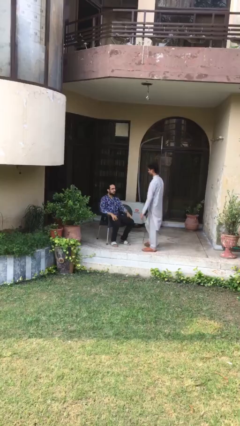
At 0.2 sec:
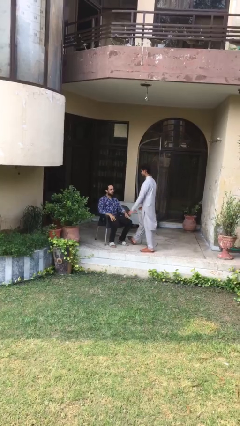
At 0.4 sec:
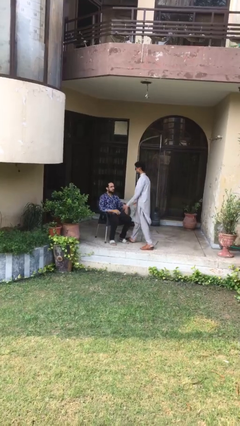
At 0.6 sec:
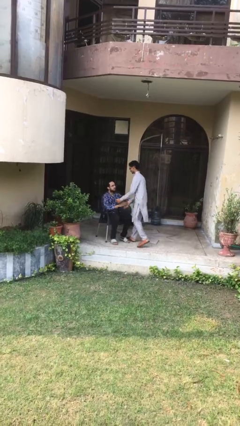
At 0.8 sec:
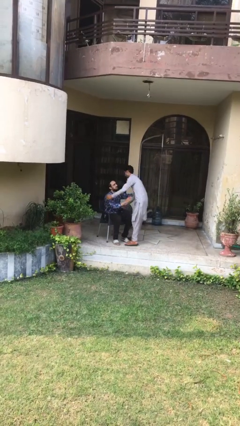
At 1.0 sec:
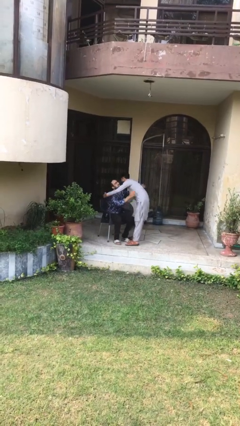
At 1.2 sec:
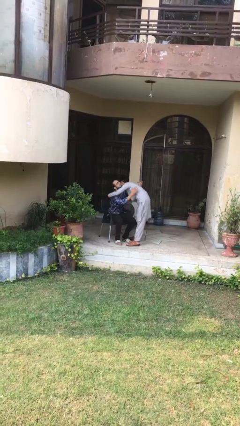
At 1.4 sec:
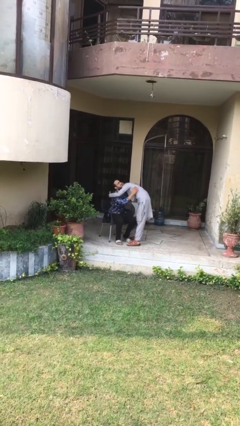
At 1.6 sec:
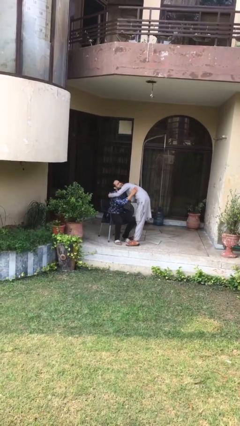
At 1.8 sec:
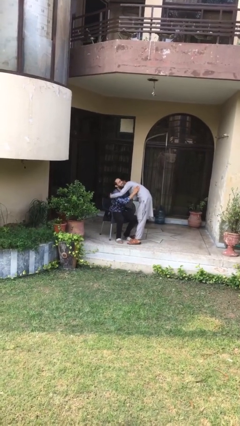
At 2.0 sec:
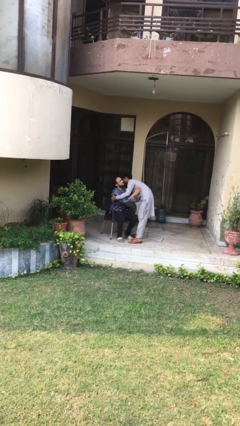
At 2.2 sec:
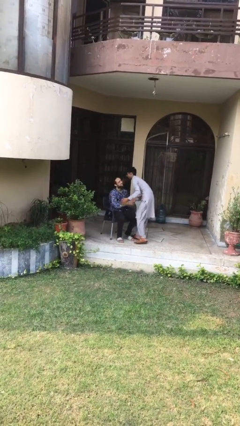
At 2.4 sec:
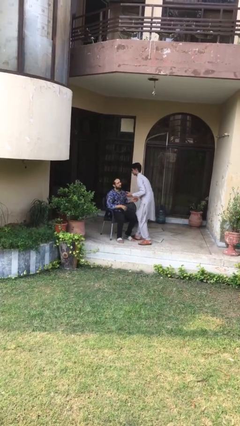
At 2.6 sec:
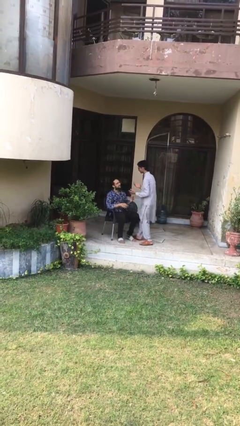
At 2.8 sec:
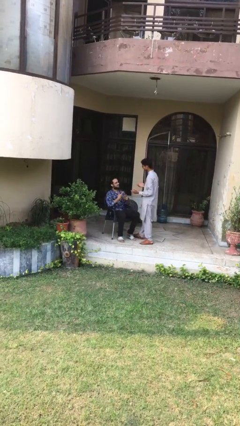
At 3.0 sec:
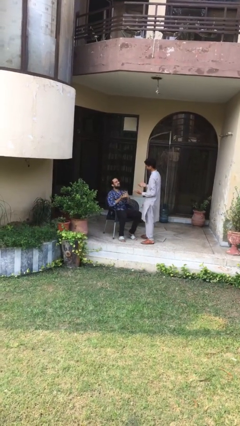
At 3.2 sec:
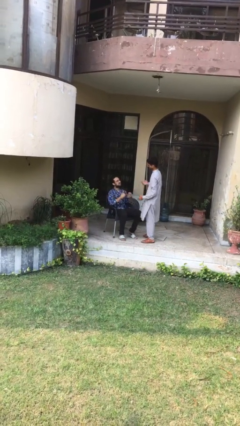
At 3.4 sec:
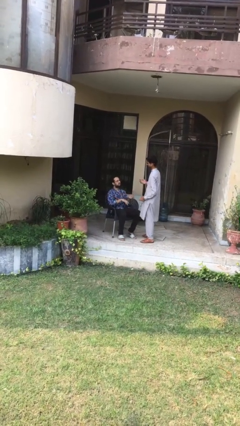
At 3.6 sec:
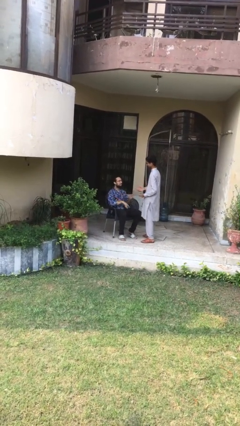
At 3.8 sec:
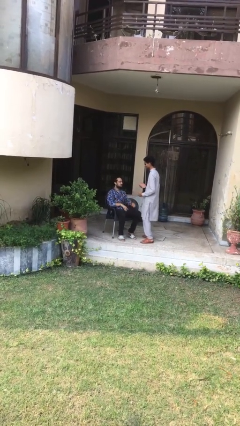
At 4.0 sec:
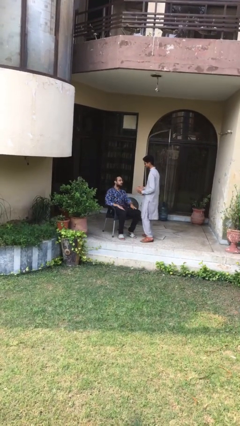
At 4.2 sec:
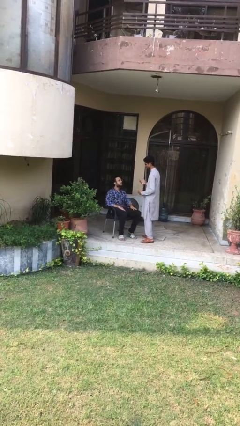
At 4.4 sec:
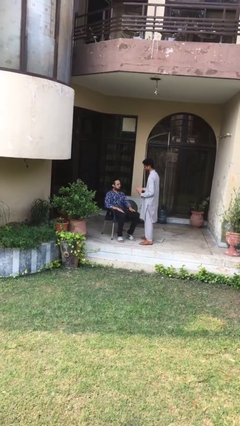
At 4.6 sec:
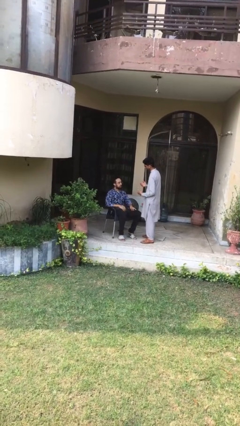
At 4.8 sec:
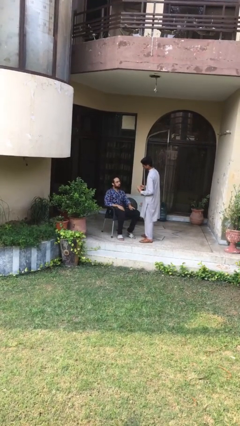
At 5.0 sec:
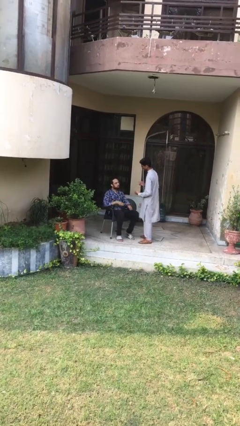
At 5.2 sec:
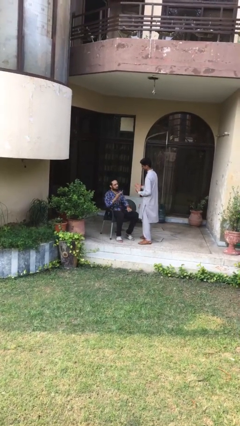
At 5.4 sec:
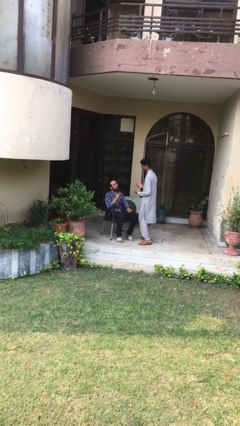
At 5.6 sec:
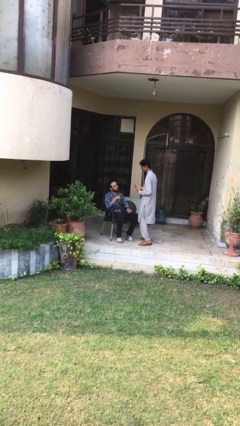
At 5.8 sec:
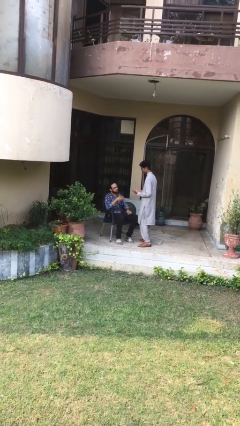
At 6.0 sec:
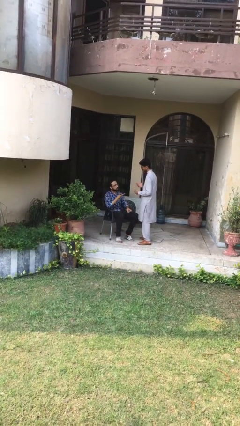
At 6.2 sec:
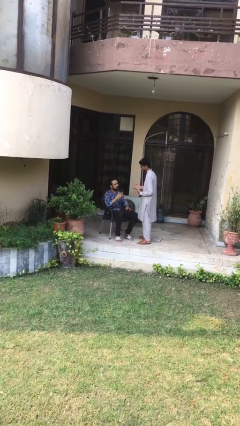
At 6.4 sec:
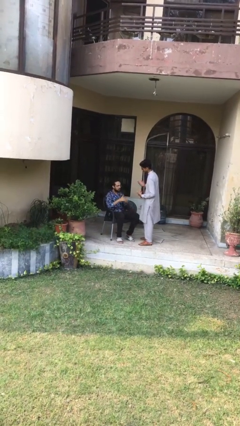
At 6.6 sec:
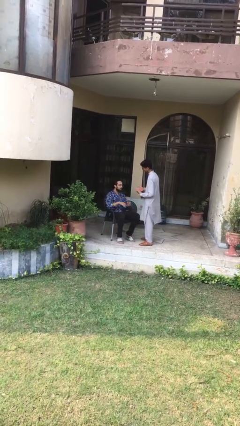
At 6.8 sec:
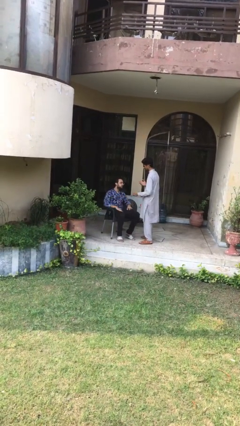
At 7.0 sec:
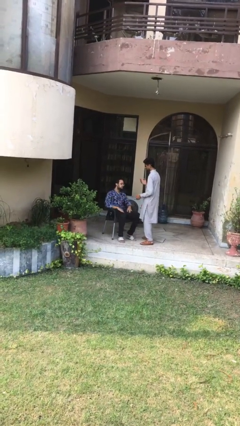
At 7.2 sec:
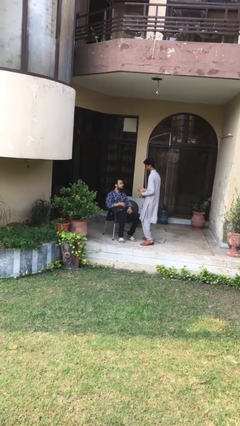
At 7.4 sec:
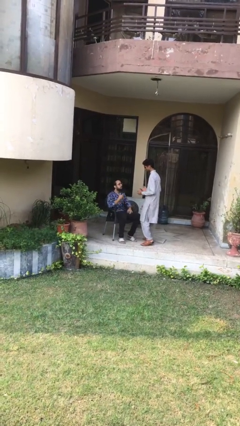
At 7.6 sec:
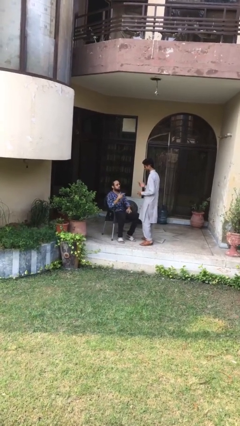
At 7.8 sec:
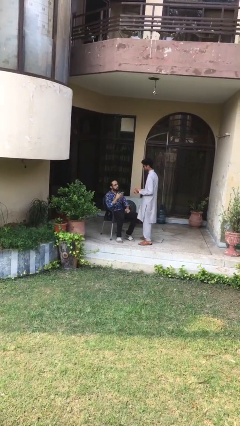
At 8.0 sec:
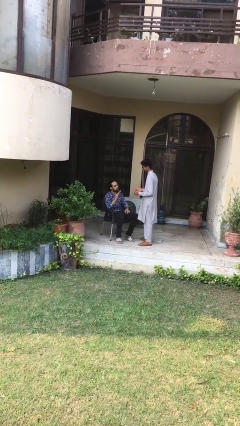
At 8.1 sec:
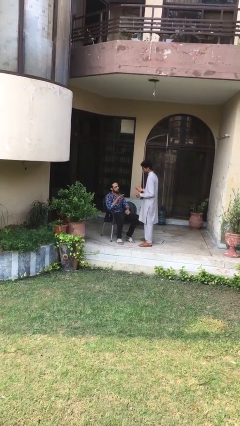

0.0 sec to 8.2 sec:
person embraces person

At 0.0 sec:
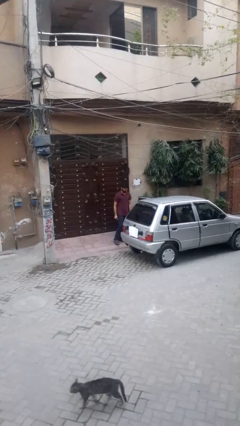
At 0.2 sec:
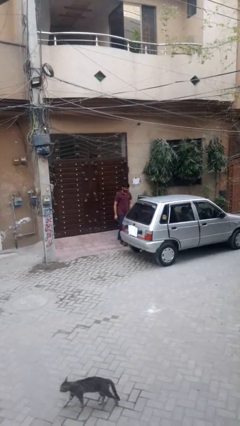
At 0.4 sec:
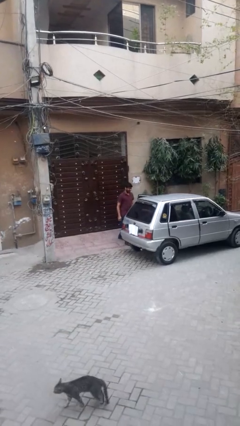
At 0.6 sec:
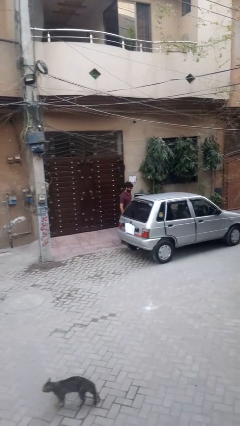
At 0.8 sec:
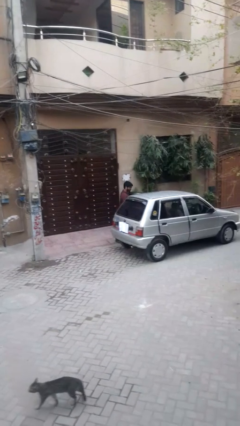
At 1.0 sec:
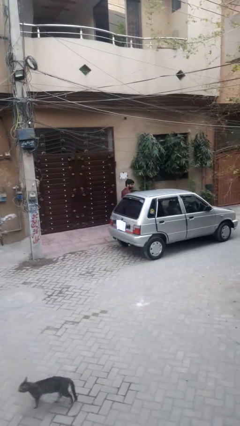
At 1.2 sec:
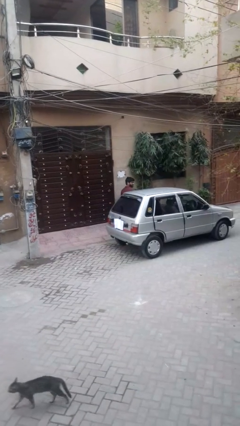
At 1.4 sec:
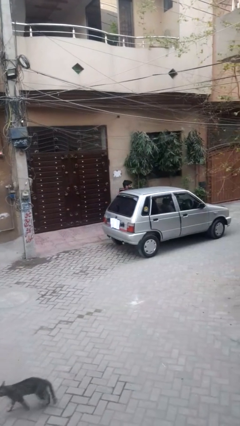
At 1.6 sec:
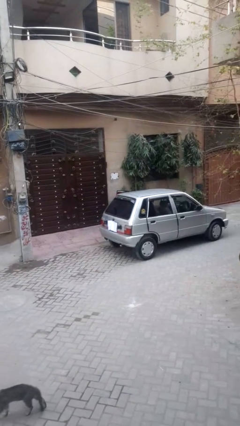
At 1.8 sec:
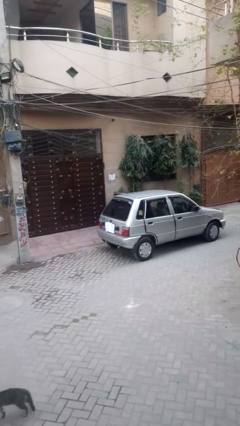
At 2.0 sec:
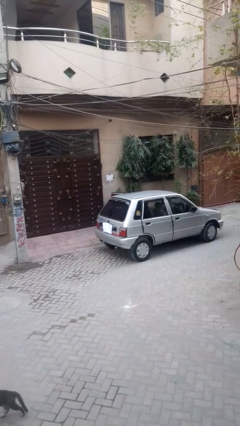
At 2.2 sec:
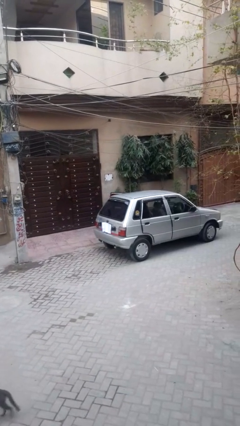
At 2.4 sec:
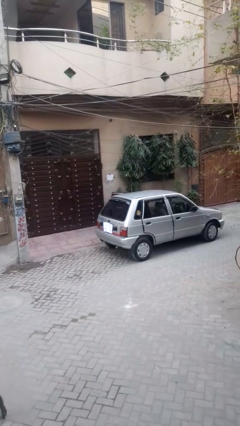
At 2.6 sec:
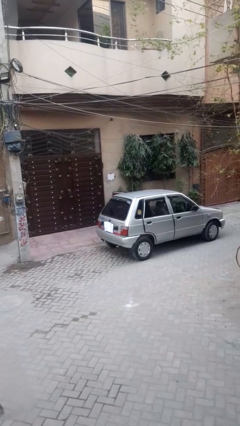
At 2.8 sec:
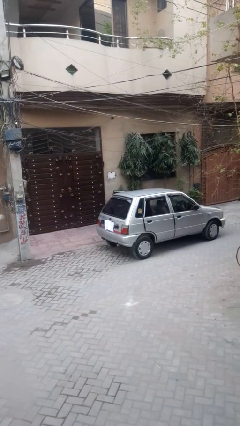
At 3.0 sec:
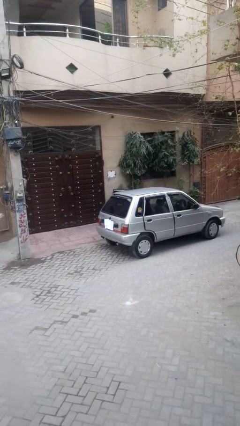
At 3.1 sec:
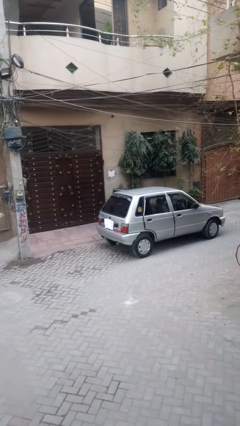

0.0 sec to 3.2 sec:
person enters car

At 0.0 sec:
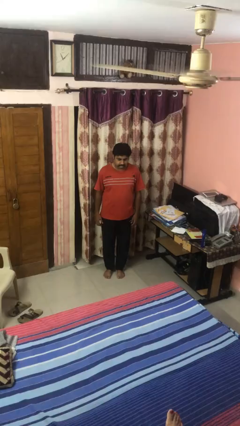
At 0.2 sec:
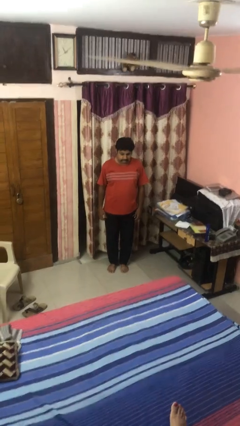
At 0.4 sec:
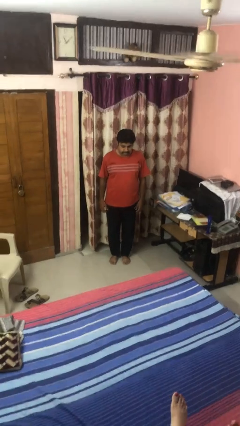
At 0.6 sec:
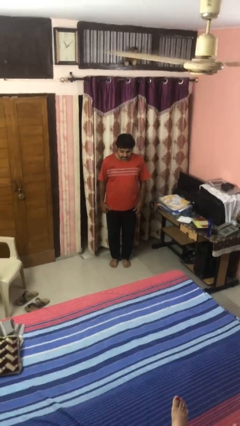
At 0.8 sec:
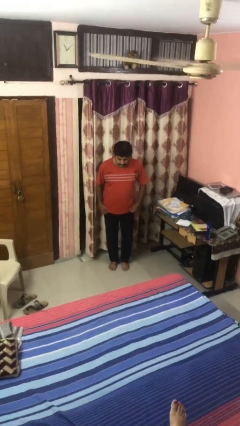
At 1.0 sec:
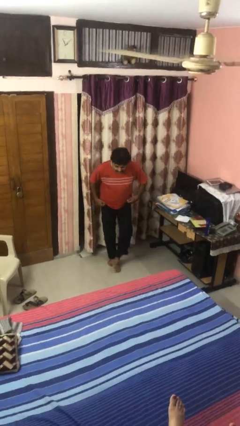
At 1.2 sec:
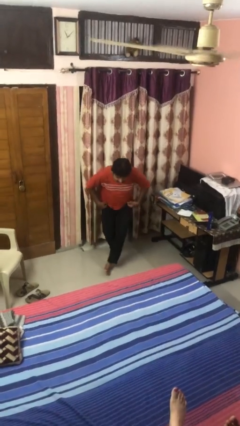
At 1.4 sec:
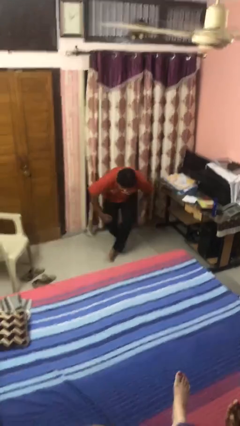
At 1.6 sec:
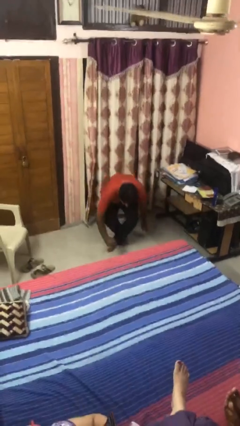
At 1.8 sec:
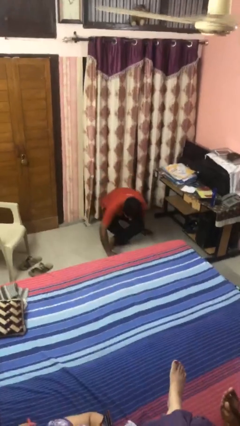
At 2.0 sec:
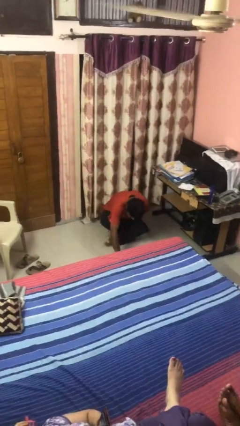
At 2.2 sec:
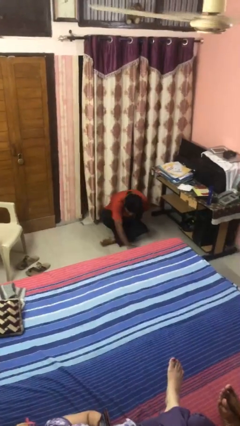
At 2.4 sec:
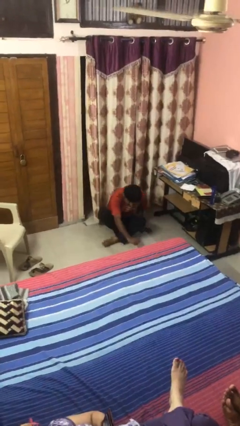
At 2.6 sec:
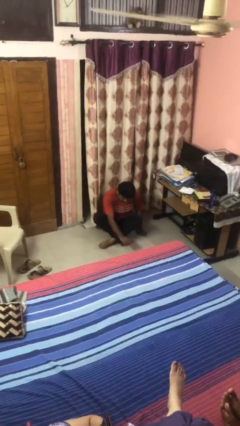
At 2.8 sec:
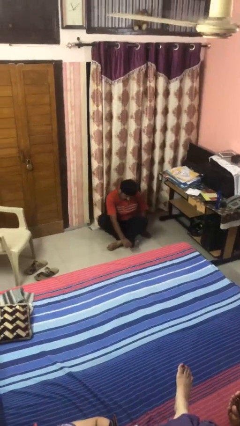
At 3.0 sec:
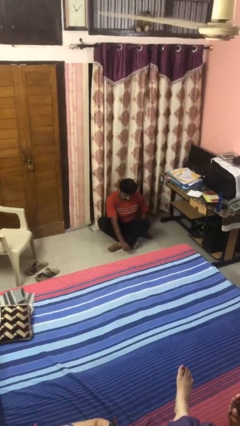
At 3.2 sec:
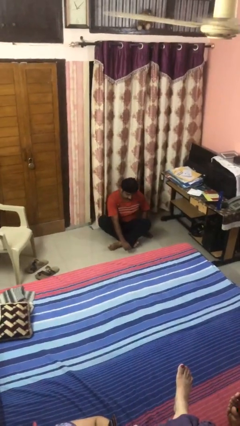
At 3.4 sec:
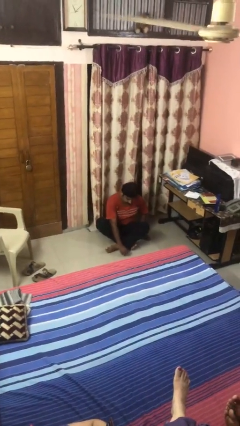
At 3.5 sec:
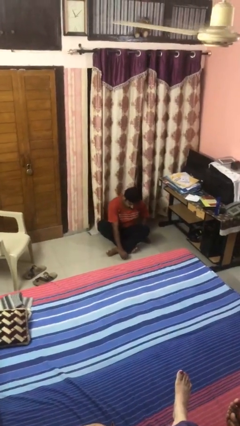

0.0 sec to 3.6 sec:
person sits crisscross

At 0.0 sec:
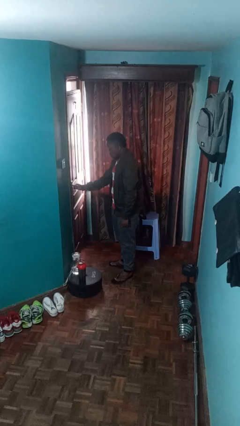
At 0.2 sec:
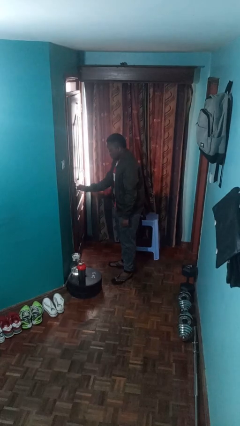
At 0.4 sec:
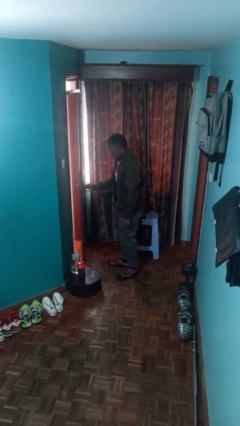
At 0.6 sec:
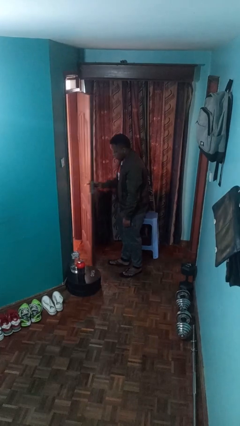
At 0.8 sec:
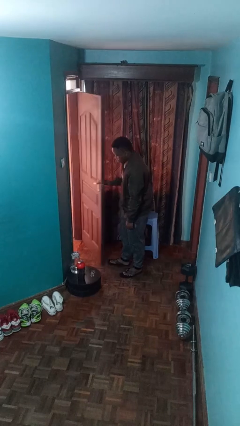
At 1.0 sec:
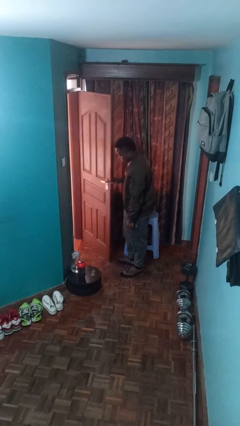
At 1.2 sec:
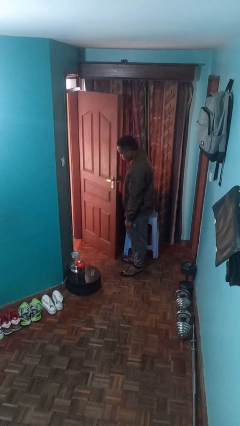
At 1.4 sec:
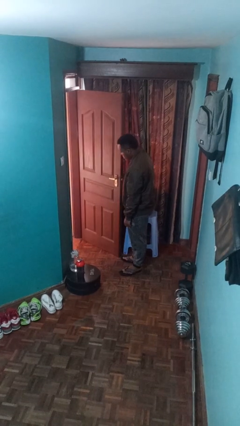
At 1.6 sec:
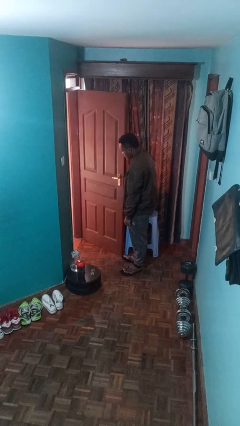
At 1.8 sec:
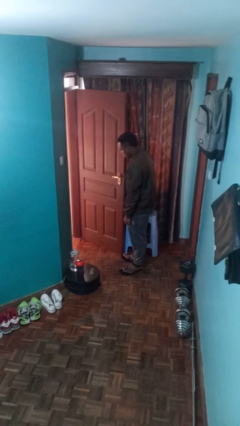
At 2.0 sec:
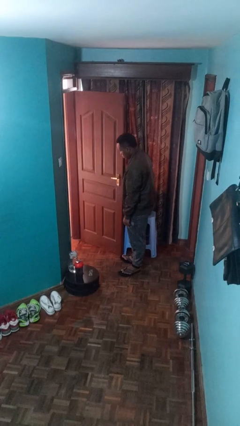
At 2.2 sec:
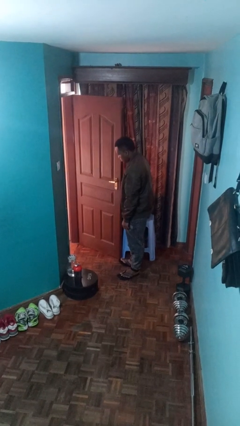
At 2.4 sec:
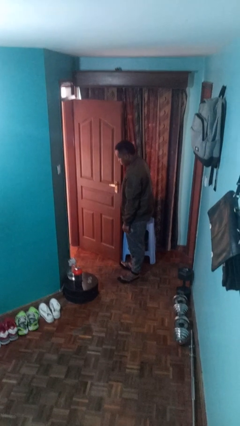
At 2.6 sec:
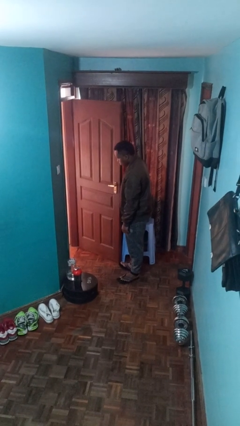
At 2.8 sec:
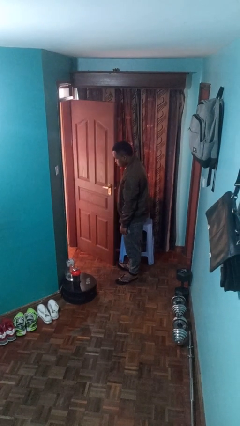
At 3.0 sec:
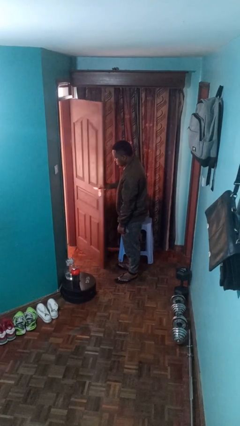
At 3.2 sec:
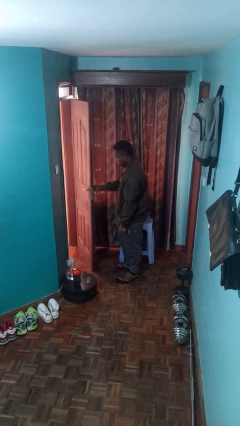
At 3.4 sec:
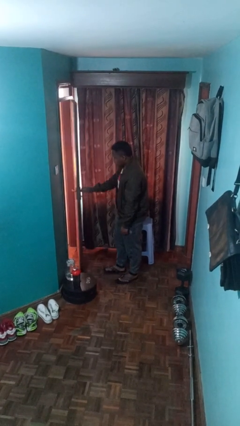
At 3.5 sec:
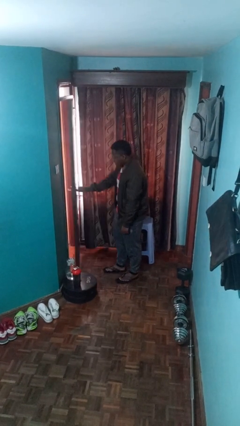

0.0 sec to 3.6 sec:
person opens facility door
